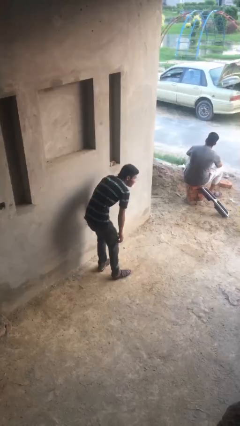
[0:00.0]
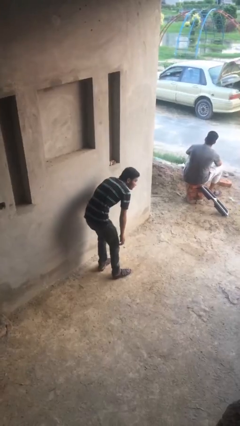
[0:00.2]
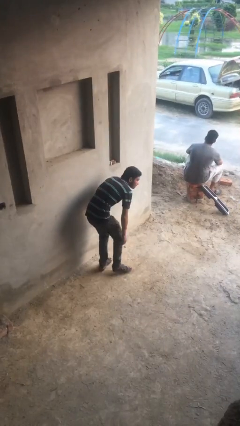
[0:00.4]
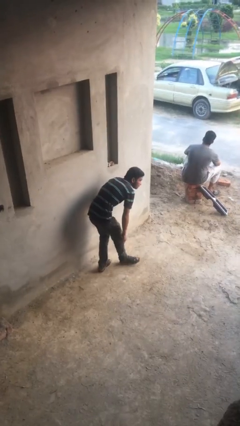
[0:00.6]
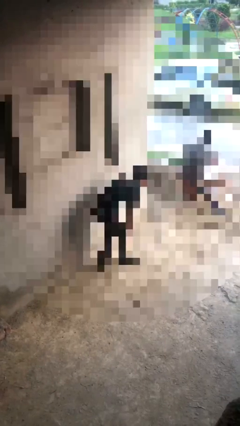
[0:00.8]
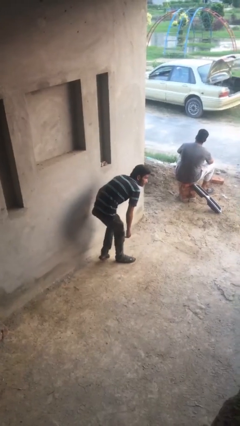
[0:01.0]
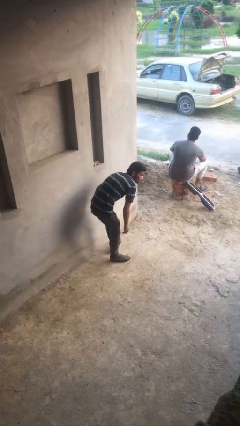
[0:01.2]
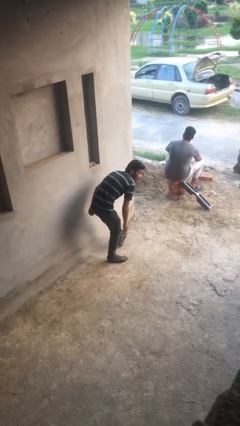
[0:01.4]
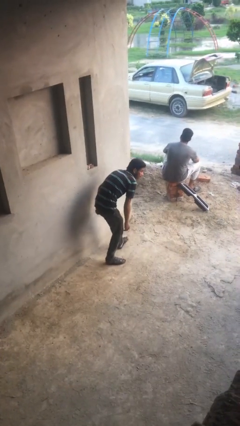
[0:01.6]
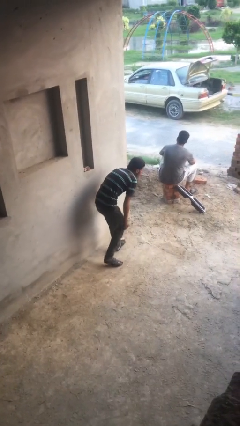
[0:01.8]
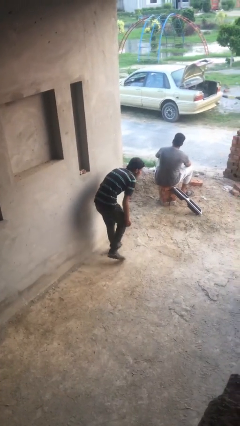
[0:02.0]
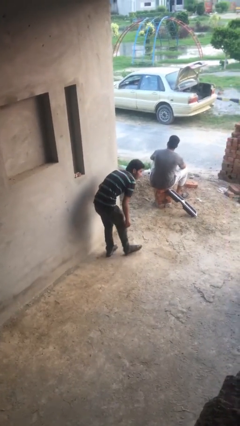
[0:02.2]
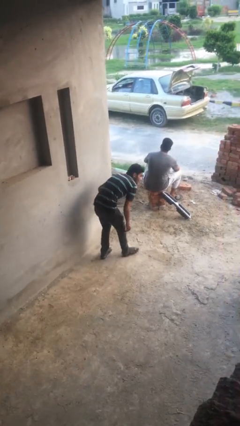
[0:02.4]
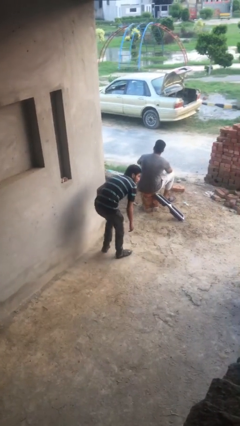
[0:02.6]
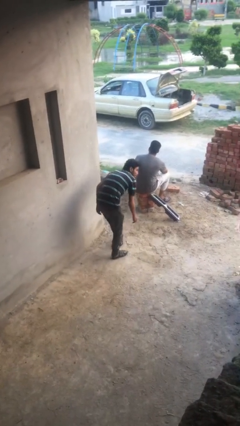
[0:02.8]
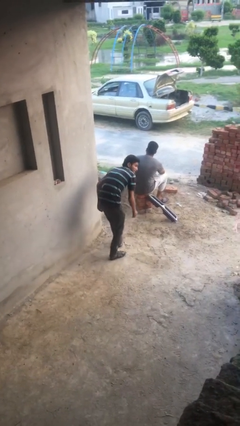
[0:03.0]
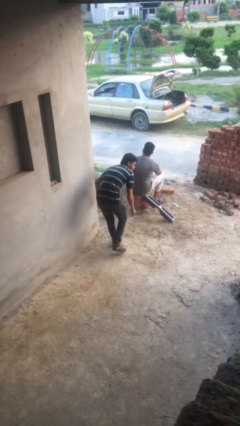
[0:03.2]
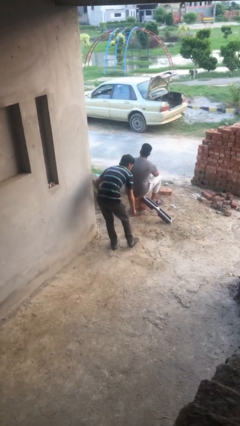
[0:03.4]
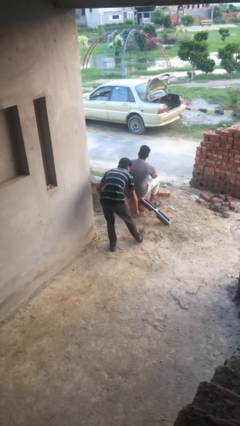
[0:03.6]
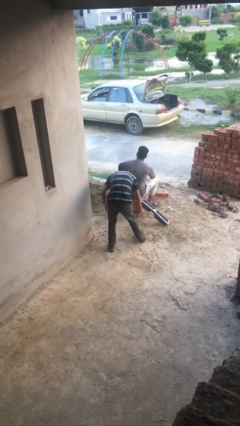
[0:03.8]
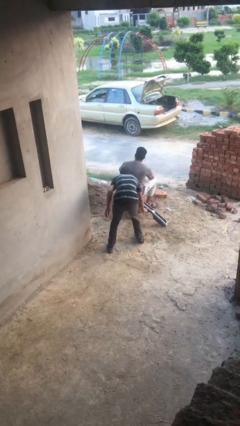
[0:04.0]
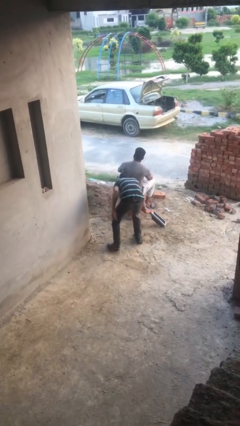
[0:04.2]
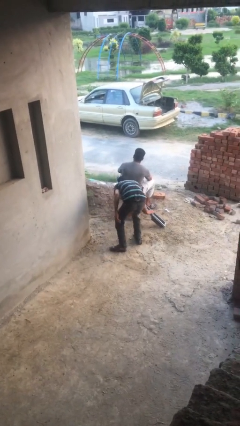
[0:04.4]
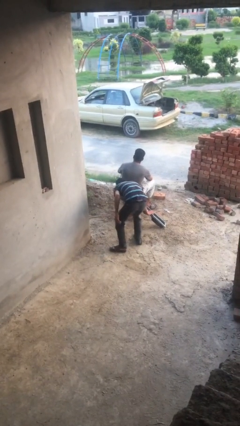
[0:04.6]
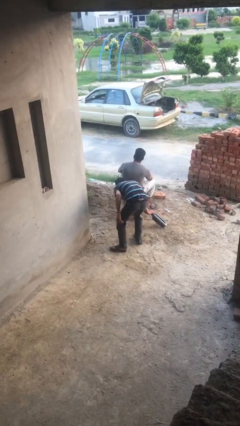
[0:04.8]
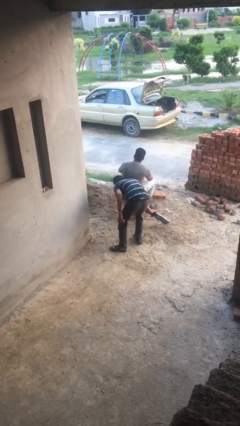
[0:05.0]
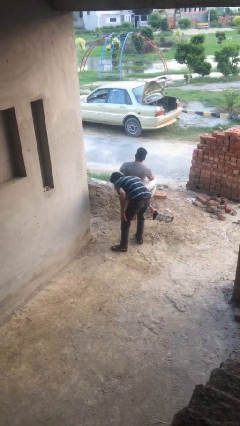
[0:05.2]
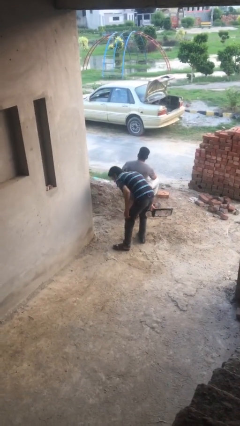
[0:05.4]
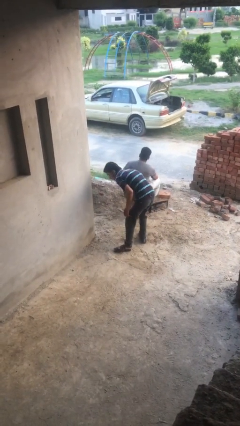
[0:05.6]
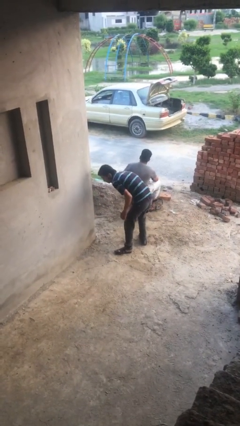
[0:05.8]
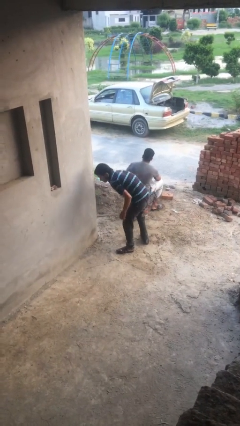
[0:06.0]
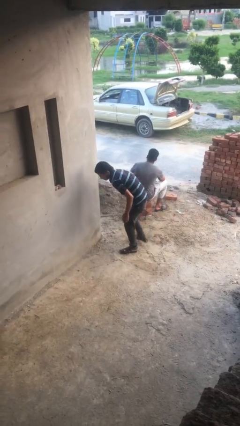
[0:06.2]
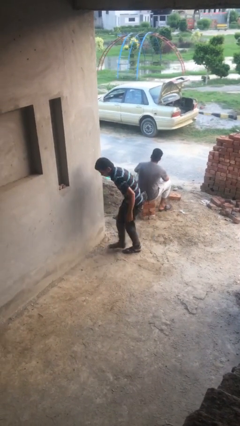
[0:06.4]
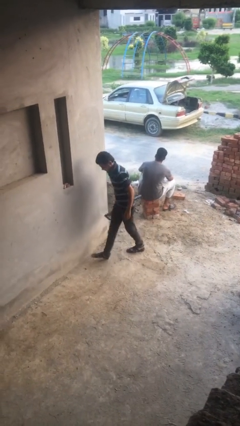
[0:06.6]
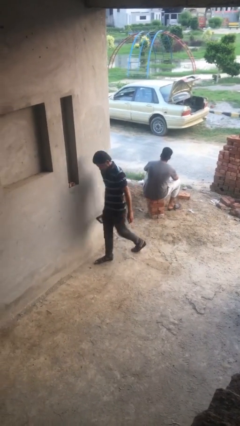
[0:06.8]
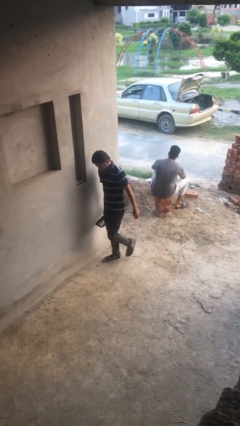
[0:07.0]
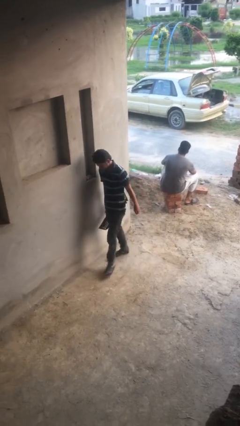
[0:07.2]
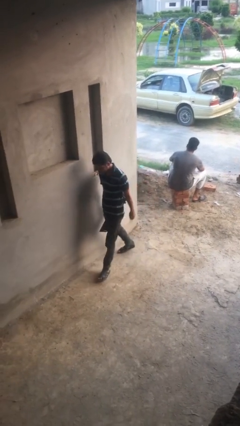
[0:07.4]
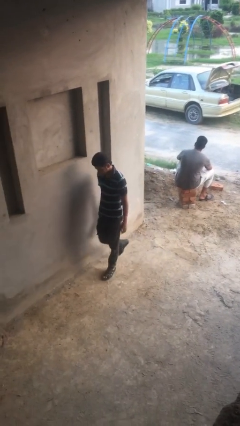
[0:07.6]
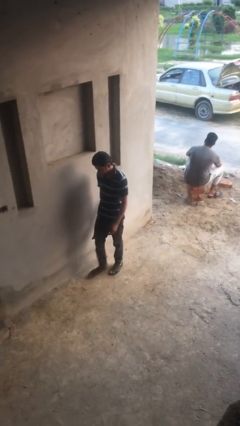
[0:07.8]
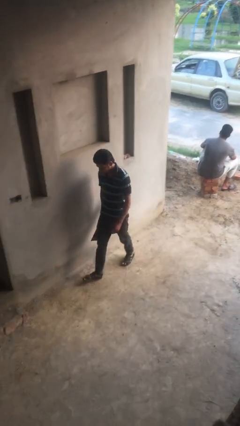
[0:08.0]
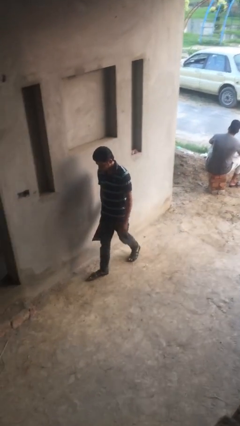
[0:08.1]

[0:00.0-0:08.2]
person steals object from person

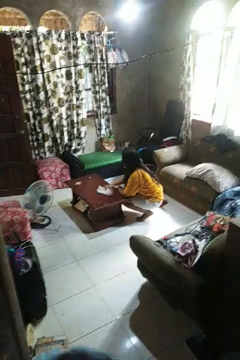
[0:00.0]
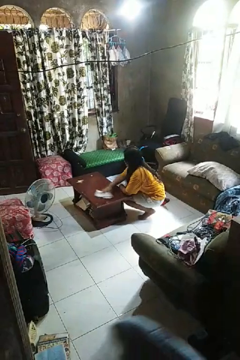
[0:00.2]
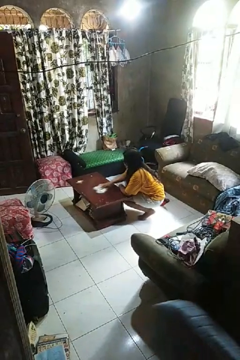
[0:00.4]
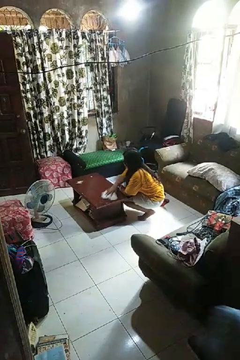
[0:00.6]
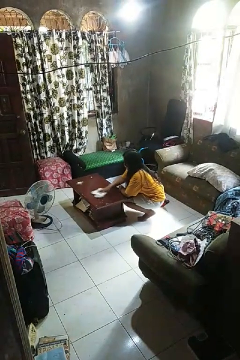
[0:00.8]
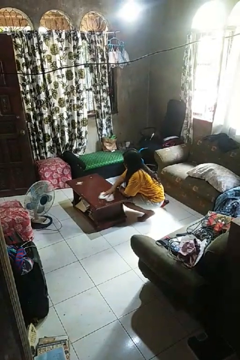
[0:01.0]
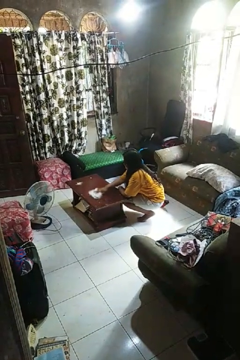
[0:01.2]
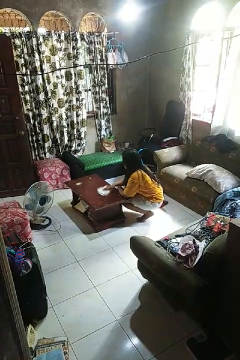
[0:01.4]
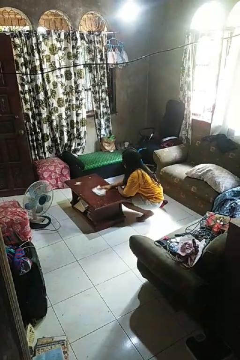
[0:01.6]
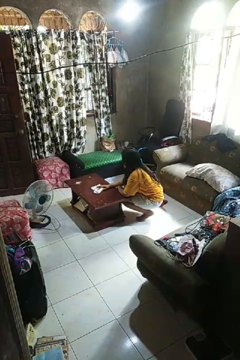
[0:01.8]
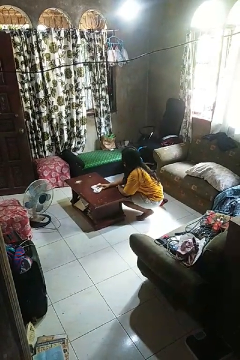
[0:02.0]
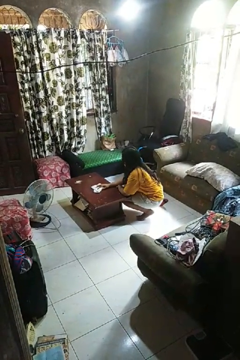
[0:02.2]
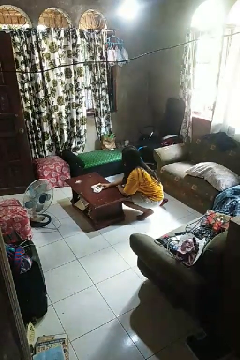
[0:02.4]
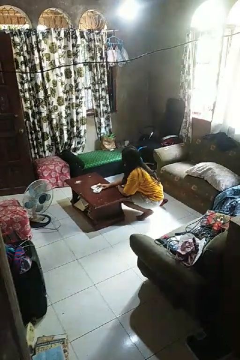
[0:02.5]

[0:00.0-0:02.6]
person cleans table with rag

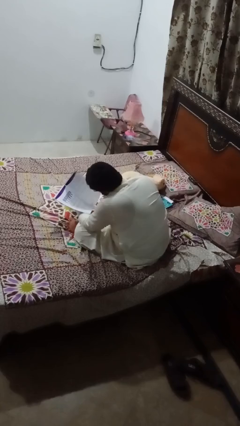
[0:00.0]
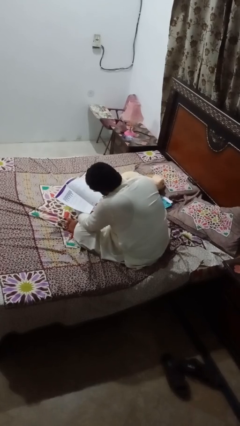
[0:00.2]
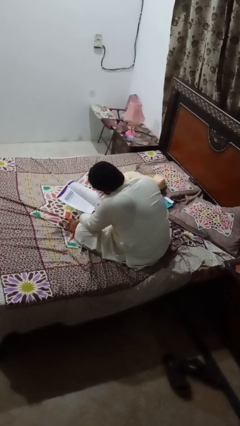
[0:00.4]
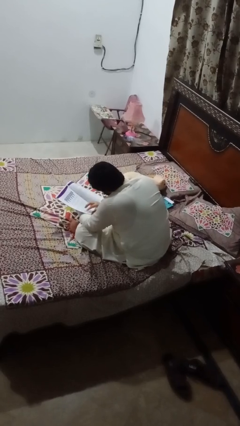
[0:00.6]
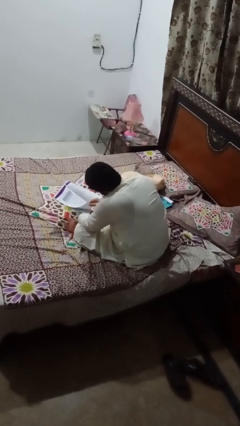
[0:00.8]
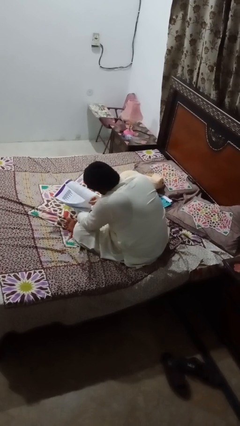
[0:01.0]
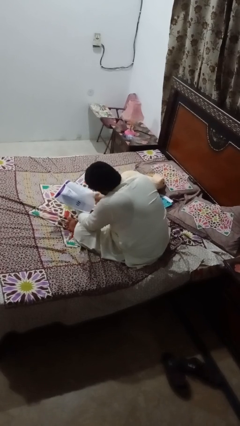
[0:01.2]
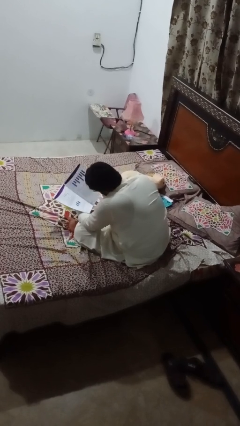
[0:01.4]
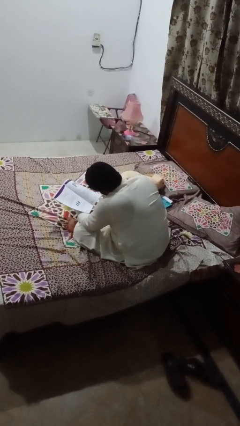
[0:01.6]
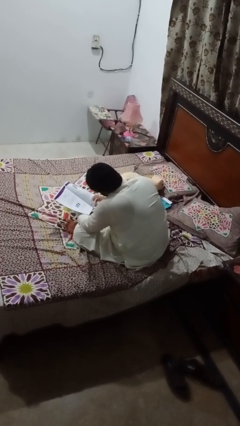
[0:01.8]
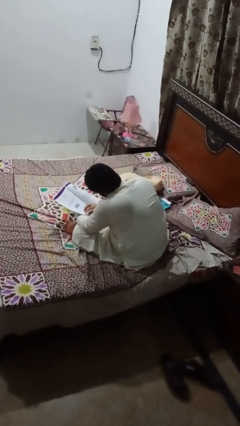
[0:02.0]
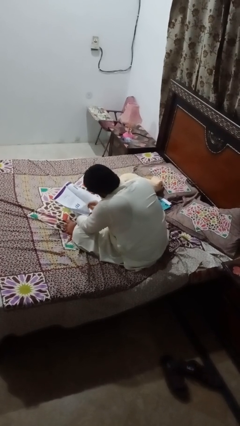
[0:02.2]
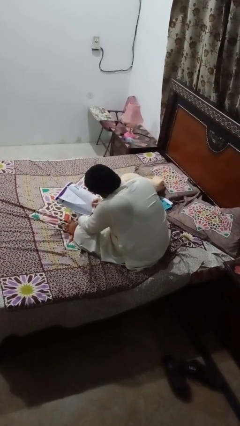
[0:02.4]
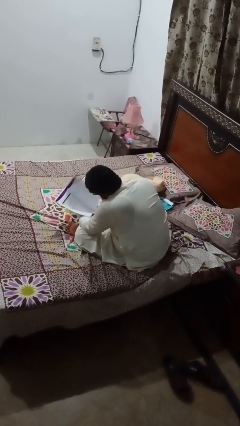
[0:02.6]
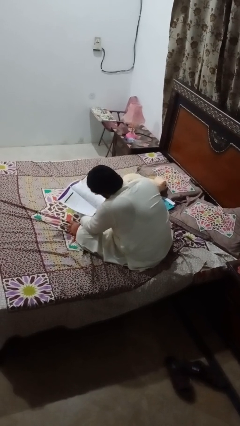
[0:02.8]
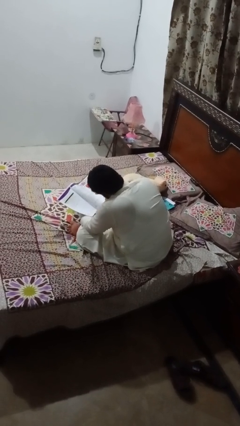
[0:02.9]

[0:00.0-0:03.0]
person reads book

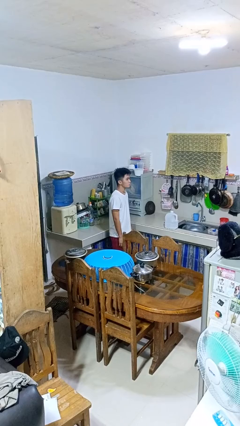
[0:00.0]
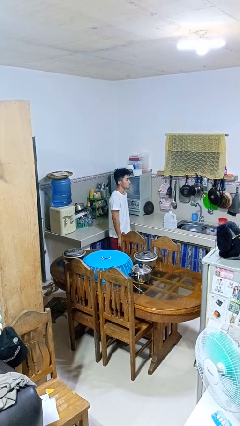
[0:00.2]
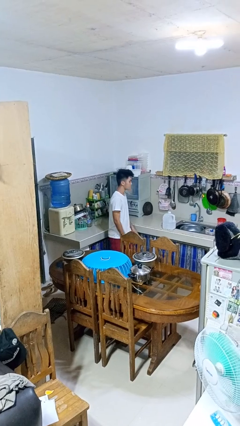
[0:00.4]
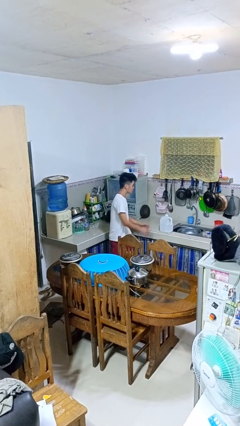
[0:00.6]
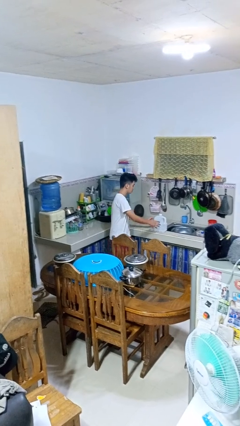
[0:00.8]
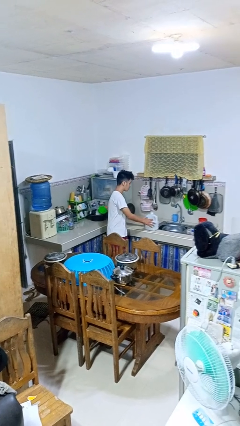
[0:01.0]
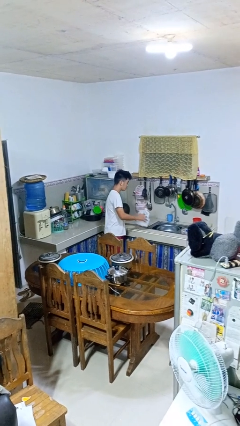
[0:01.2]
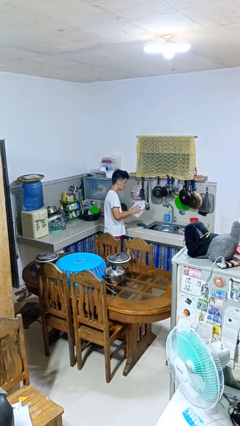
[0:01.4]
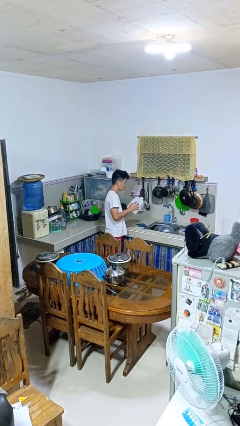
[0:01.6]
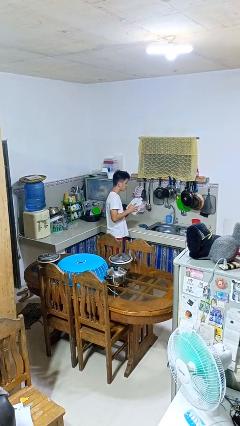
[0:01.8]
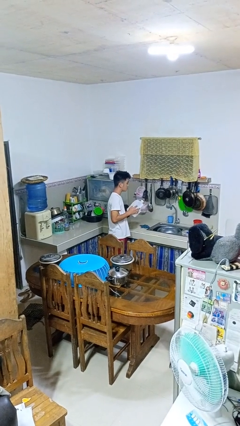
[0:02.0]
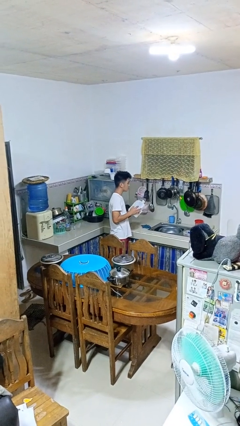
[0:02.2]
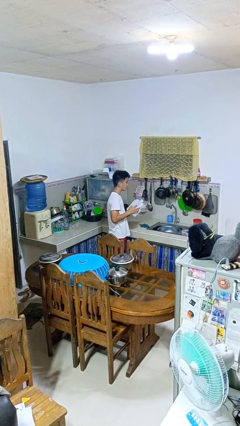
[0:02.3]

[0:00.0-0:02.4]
person picks up object from countertop

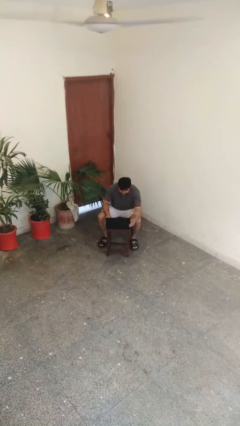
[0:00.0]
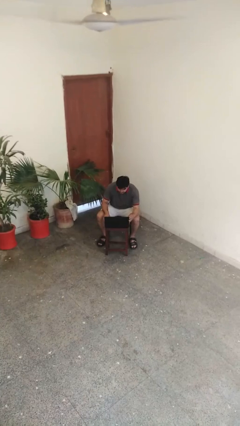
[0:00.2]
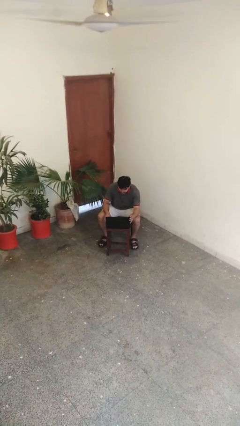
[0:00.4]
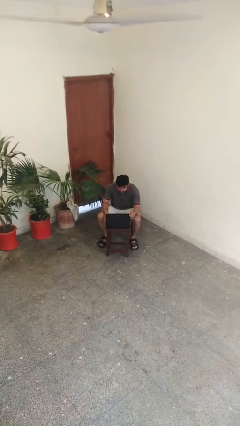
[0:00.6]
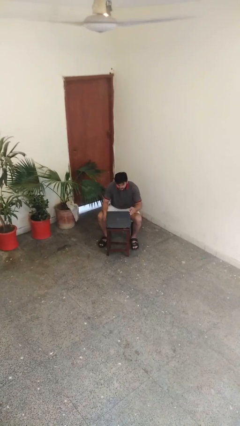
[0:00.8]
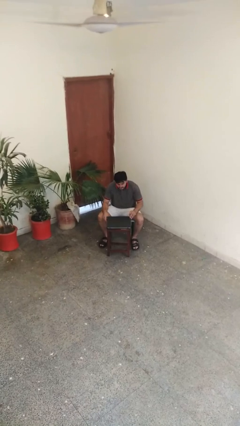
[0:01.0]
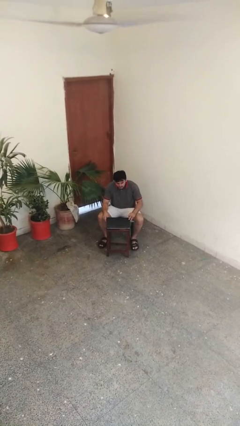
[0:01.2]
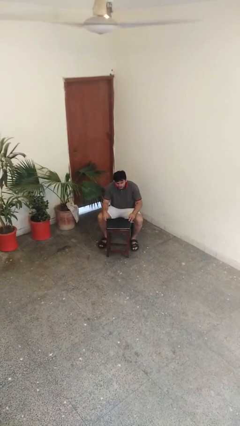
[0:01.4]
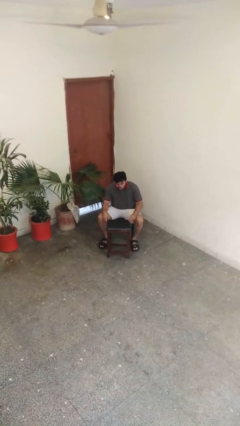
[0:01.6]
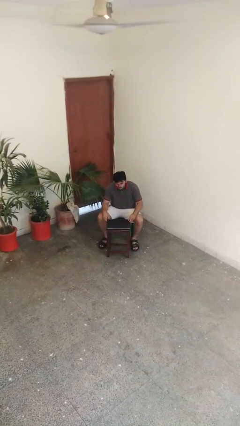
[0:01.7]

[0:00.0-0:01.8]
person closes laptop
